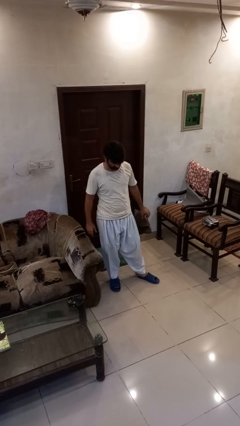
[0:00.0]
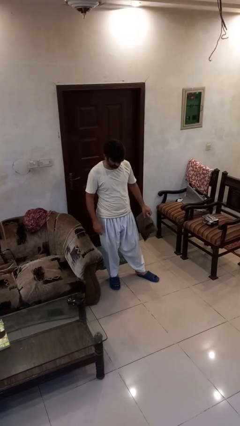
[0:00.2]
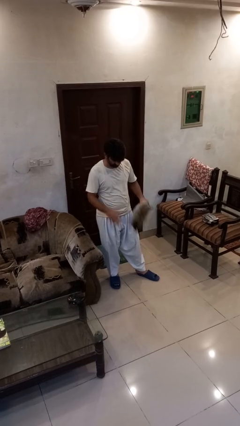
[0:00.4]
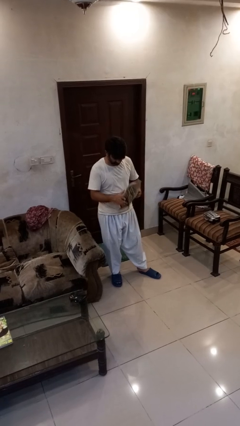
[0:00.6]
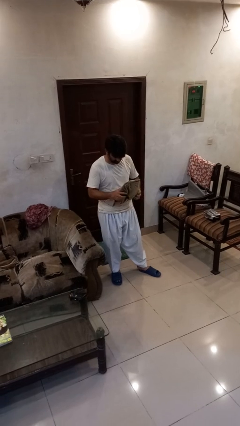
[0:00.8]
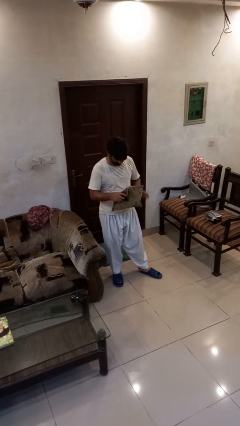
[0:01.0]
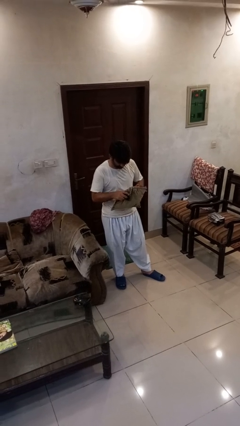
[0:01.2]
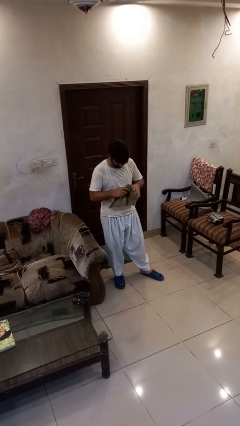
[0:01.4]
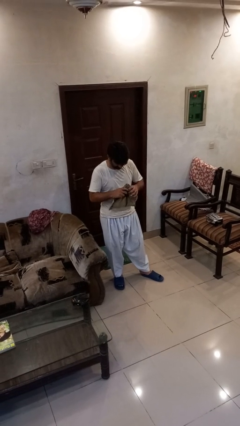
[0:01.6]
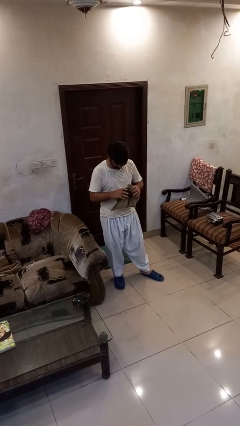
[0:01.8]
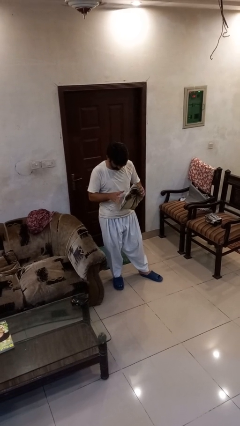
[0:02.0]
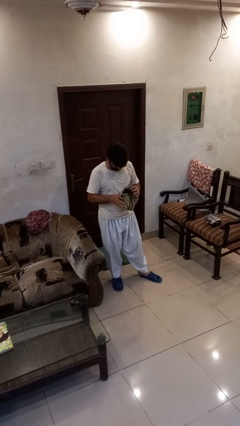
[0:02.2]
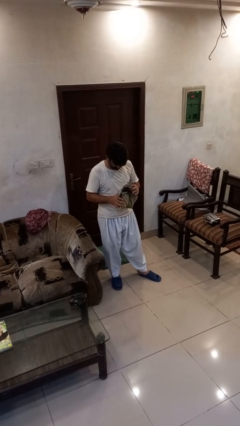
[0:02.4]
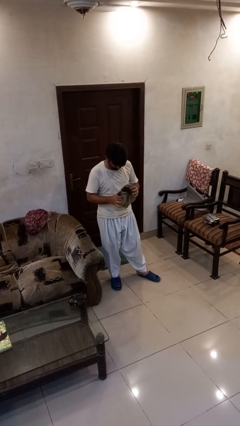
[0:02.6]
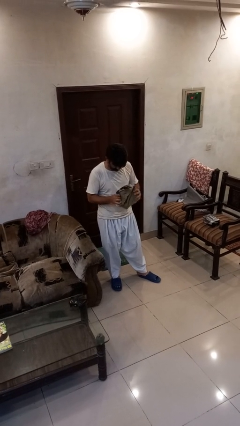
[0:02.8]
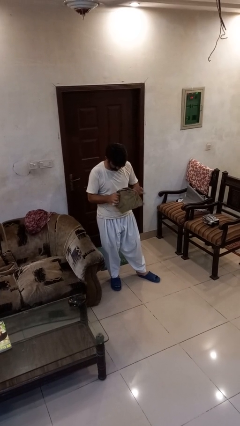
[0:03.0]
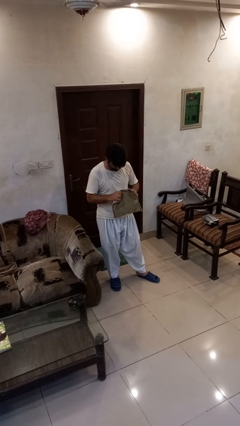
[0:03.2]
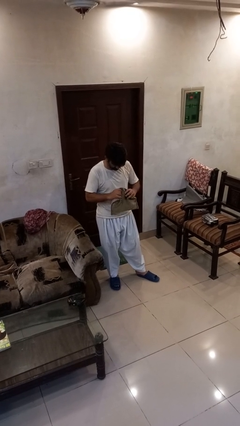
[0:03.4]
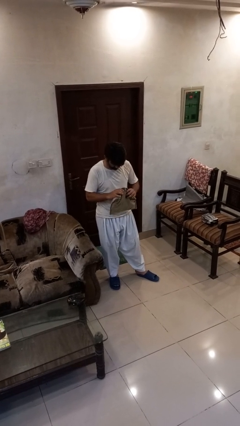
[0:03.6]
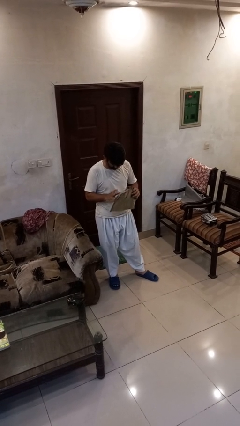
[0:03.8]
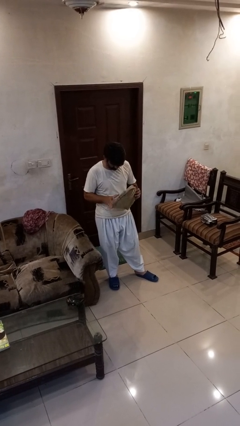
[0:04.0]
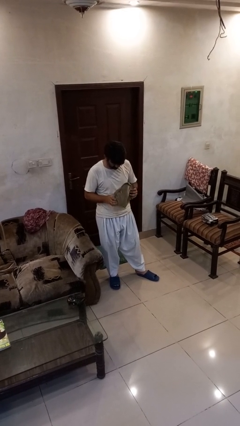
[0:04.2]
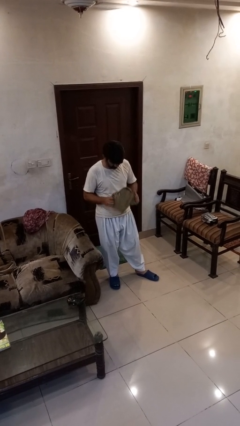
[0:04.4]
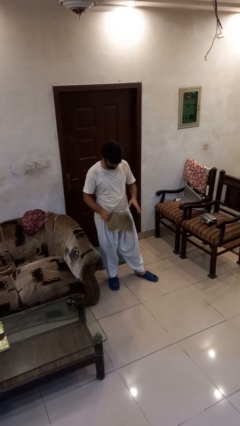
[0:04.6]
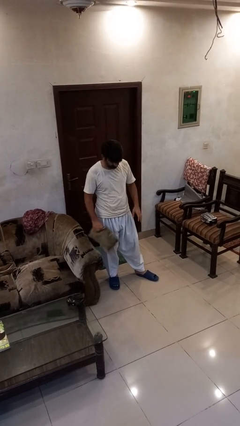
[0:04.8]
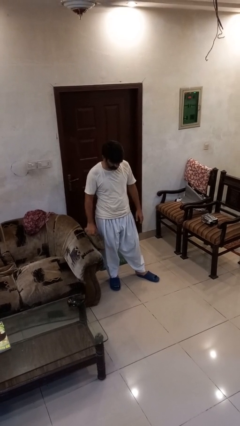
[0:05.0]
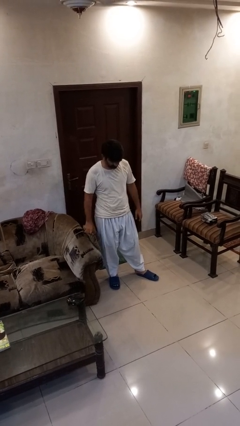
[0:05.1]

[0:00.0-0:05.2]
person squeezes object

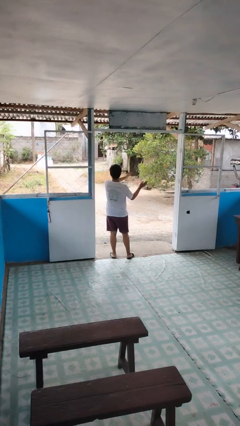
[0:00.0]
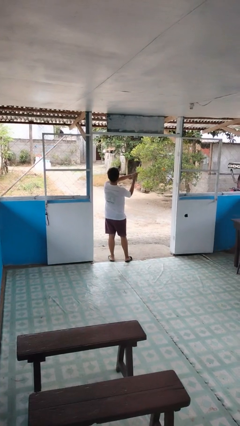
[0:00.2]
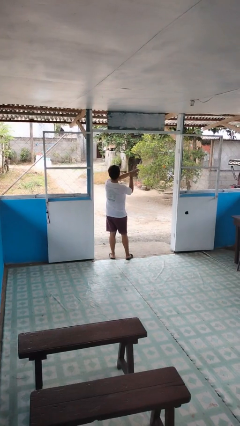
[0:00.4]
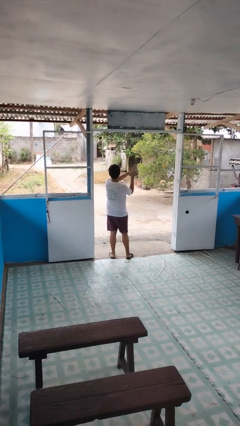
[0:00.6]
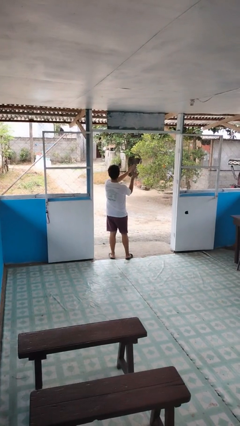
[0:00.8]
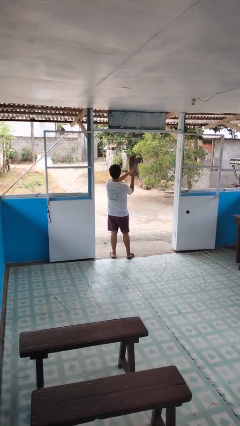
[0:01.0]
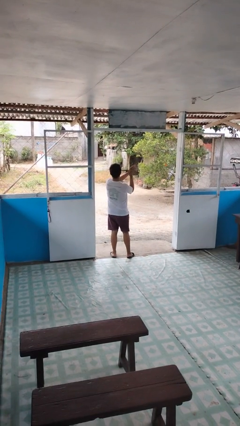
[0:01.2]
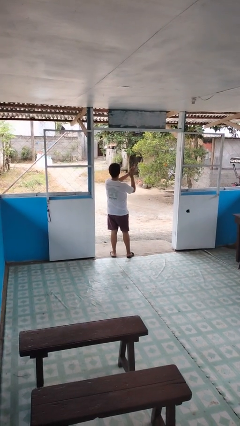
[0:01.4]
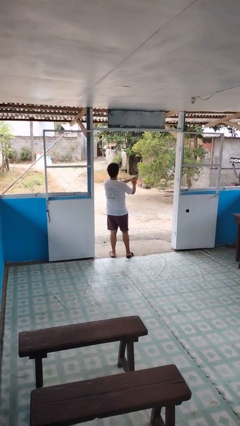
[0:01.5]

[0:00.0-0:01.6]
person claps hands

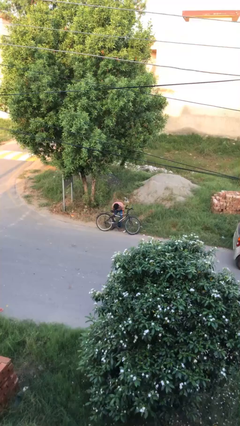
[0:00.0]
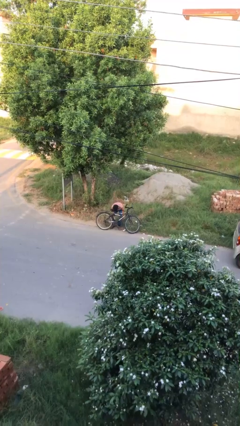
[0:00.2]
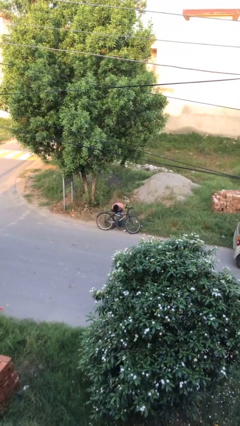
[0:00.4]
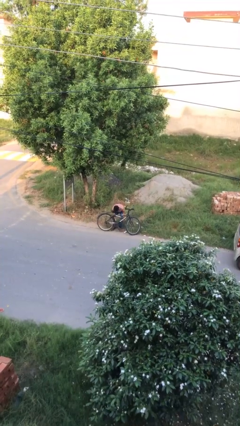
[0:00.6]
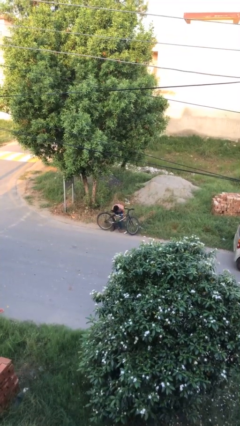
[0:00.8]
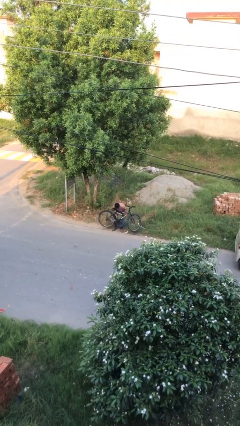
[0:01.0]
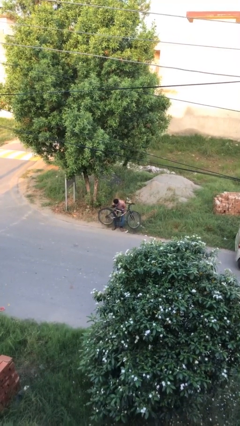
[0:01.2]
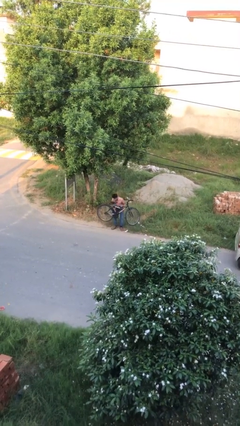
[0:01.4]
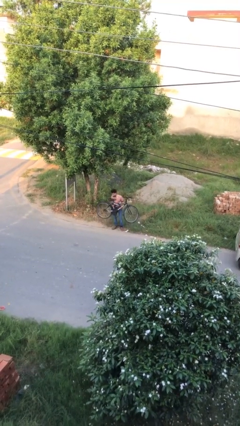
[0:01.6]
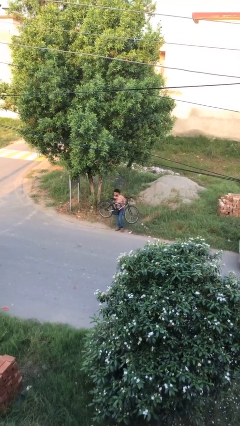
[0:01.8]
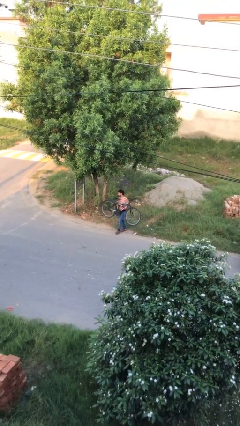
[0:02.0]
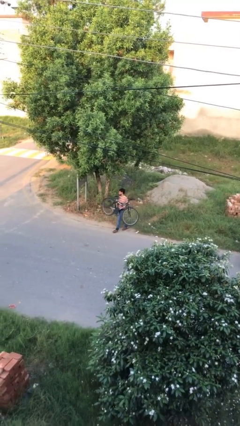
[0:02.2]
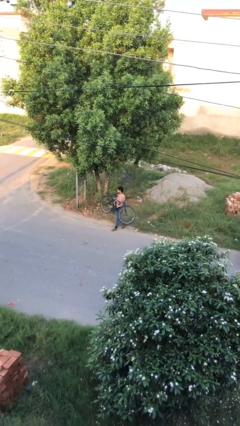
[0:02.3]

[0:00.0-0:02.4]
person picks up object from floor

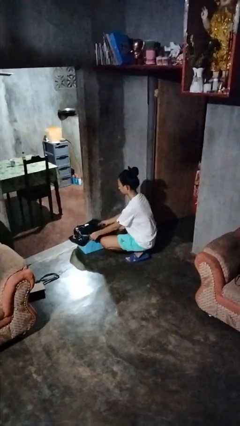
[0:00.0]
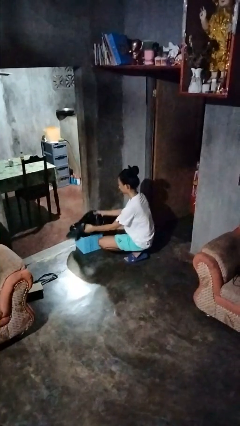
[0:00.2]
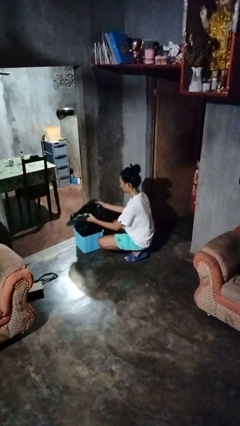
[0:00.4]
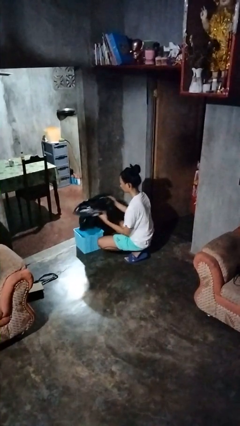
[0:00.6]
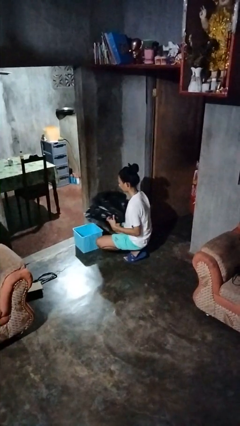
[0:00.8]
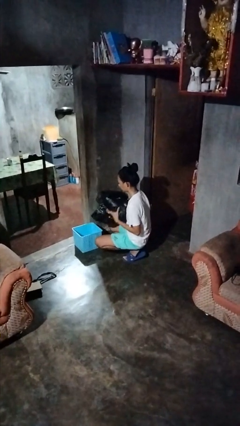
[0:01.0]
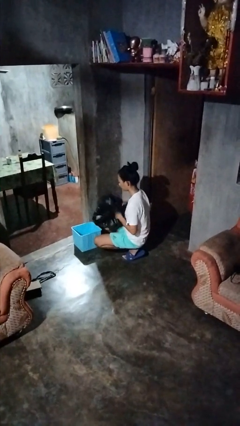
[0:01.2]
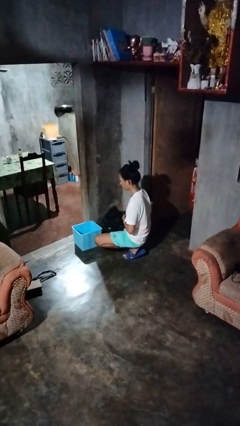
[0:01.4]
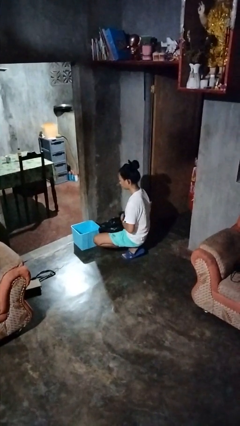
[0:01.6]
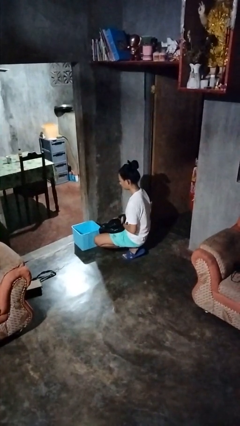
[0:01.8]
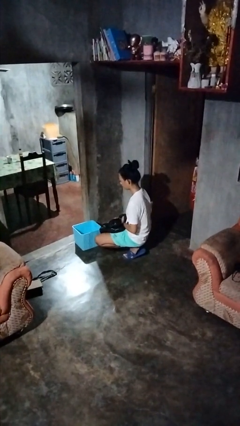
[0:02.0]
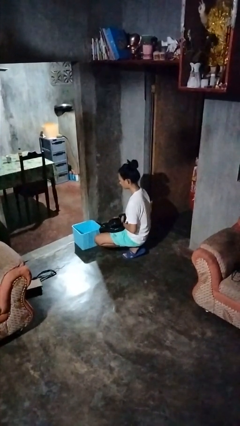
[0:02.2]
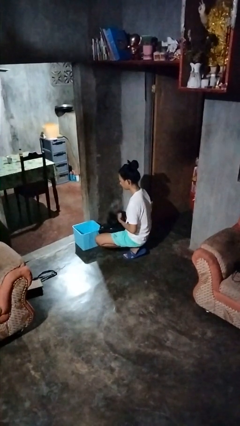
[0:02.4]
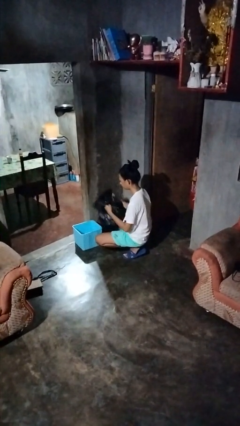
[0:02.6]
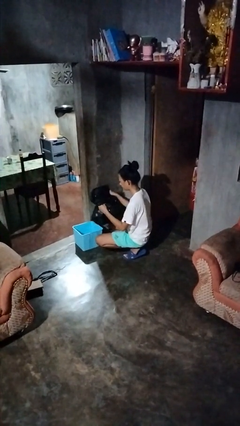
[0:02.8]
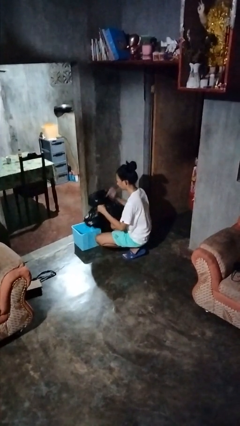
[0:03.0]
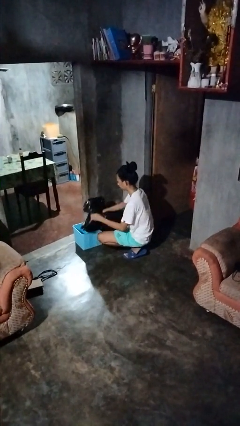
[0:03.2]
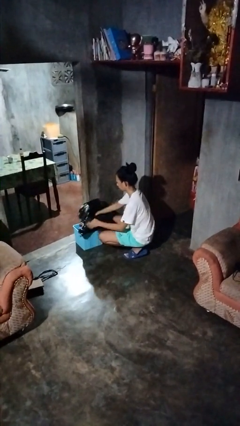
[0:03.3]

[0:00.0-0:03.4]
person removes trashbag from trashcan

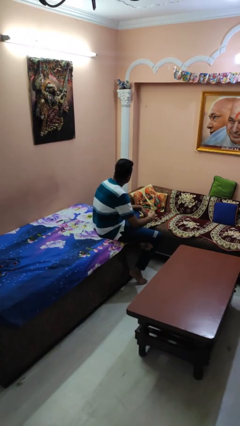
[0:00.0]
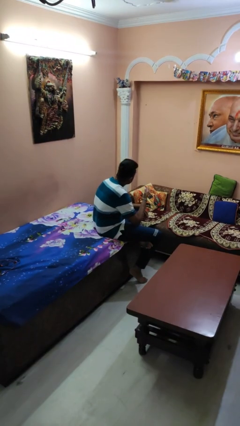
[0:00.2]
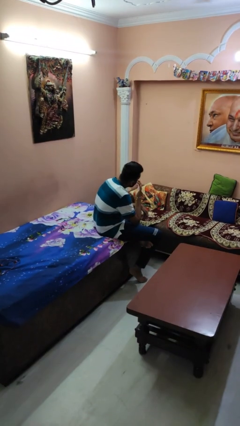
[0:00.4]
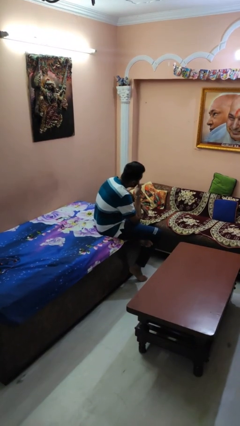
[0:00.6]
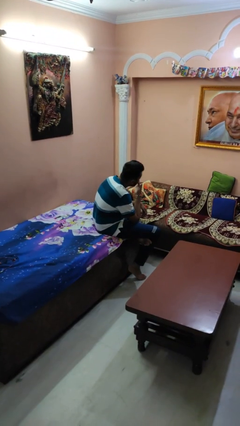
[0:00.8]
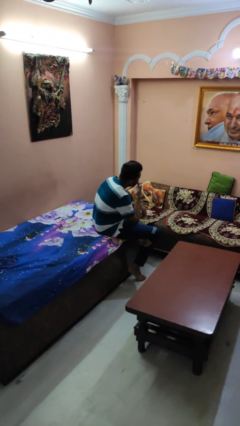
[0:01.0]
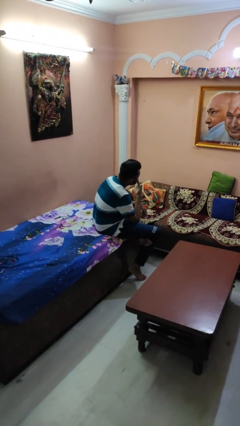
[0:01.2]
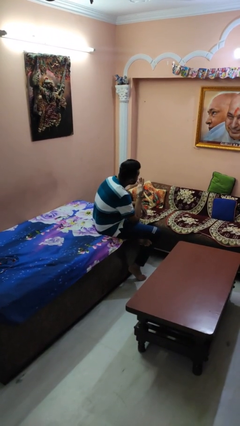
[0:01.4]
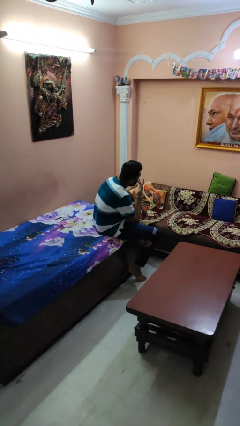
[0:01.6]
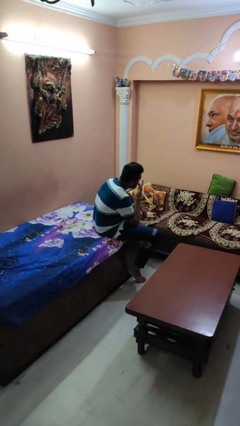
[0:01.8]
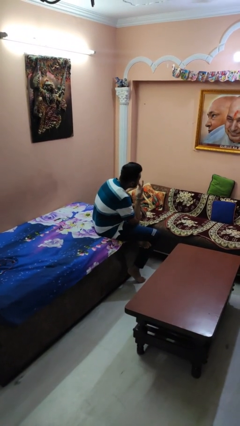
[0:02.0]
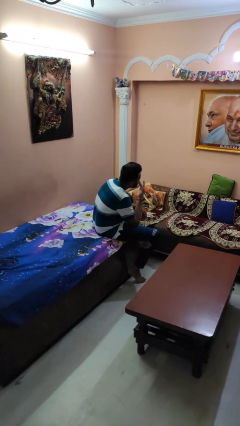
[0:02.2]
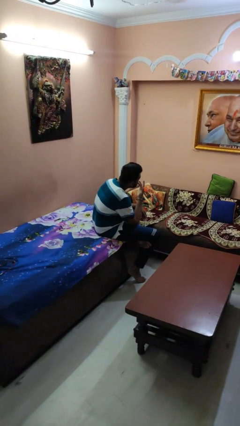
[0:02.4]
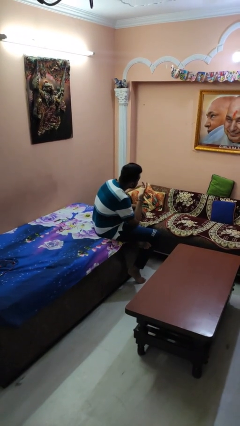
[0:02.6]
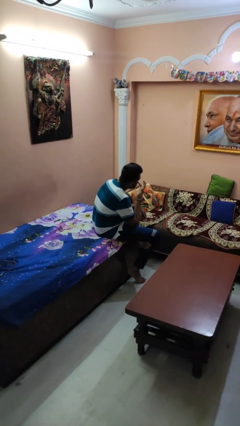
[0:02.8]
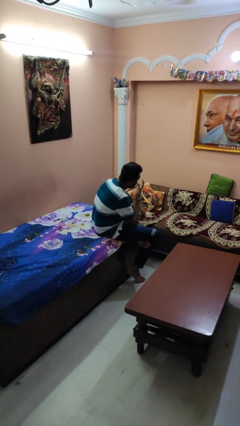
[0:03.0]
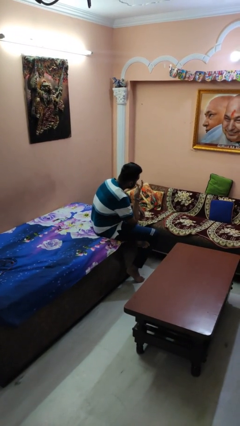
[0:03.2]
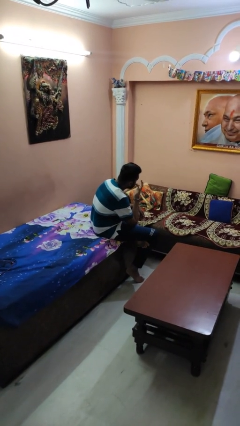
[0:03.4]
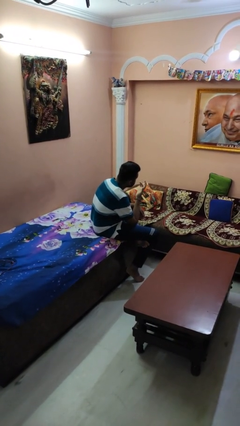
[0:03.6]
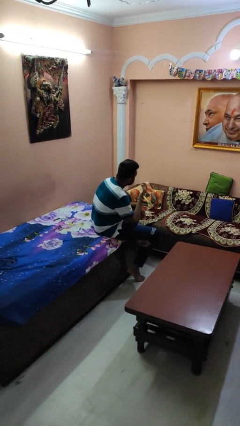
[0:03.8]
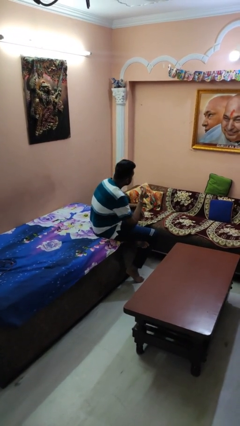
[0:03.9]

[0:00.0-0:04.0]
person licks fingers

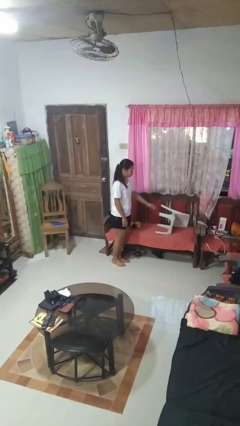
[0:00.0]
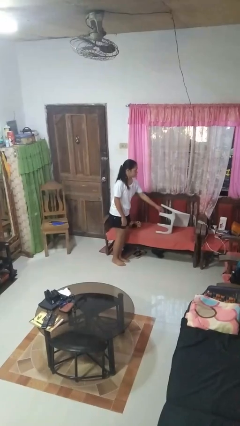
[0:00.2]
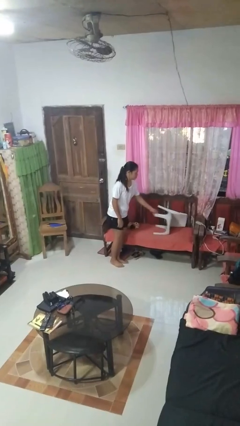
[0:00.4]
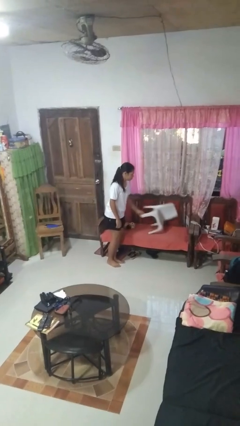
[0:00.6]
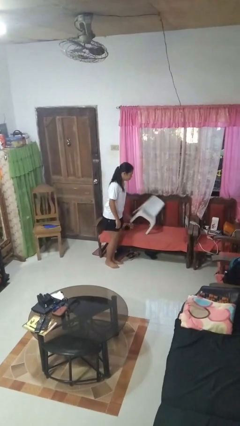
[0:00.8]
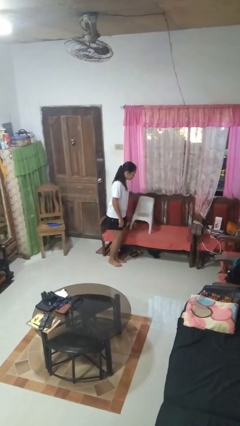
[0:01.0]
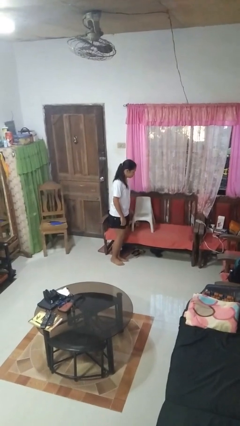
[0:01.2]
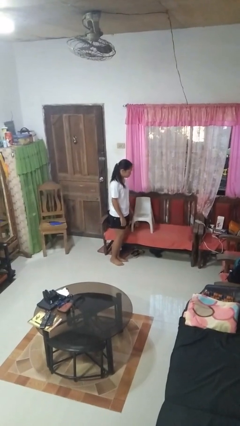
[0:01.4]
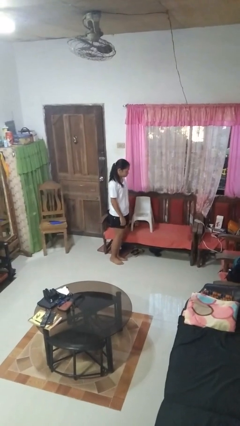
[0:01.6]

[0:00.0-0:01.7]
person sets upright furniture
